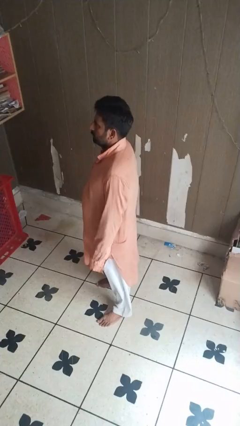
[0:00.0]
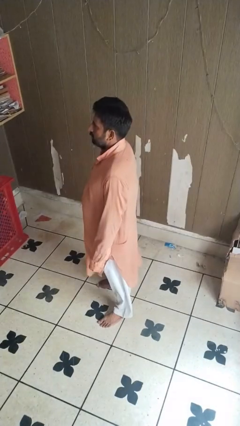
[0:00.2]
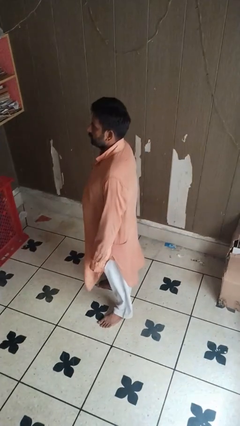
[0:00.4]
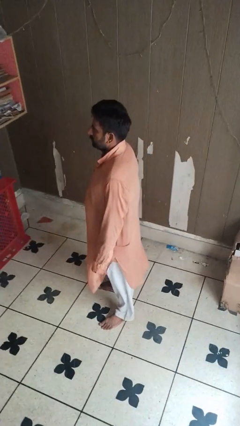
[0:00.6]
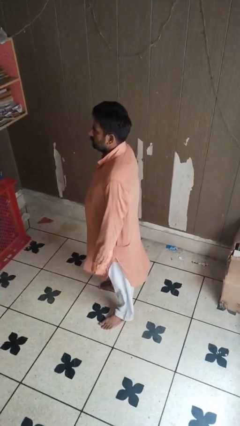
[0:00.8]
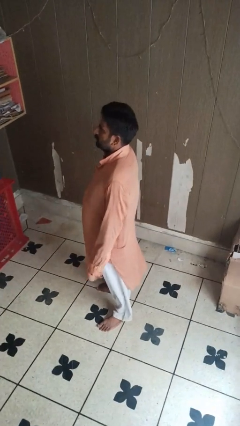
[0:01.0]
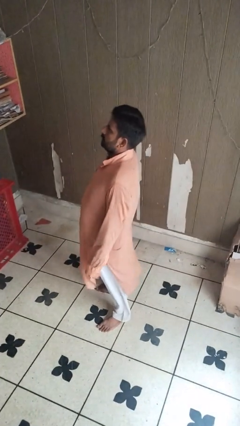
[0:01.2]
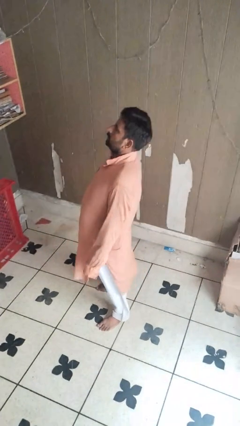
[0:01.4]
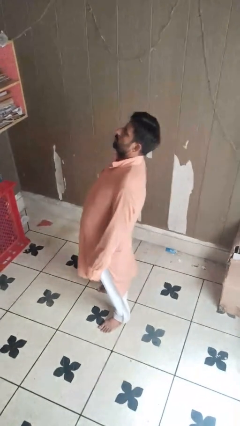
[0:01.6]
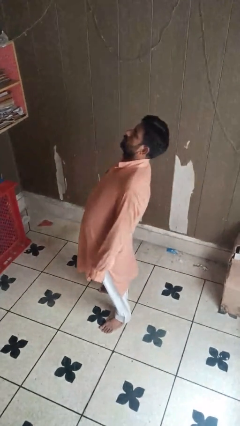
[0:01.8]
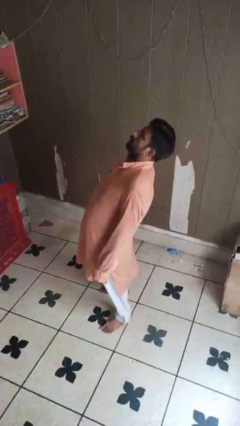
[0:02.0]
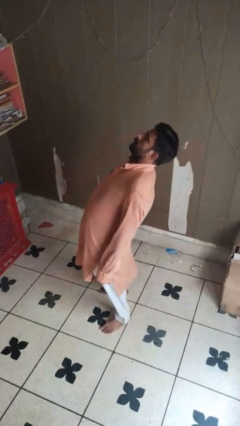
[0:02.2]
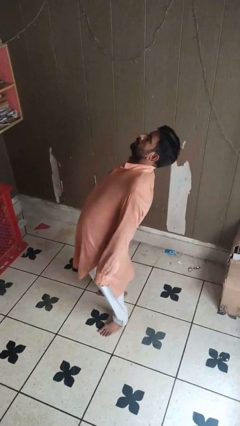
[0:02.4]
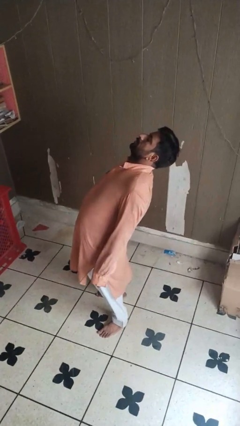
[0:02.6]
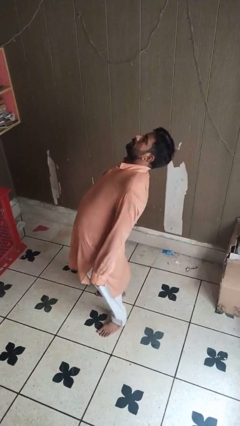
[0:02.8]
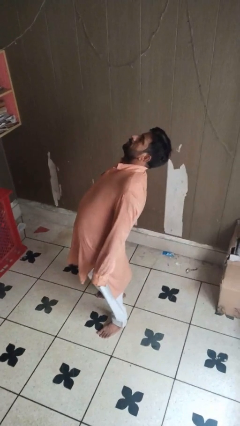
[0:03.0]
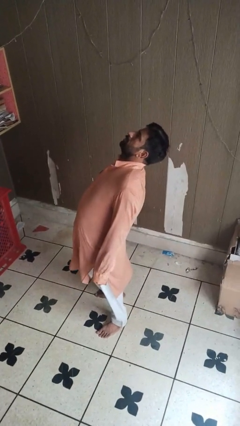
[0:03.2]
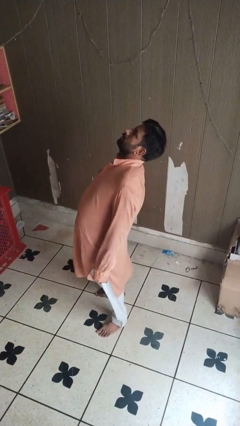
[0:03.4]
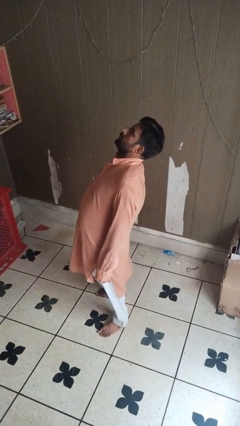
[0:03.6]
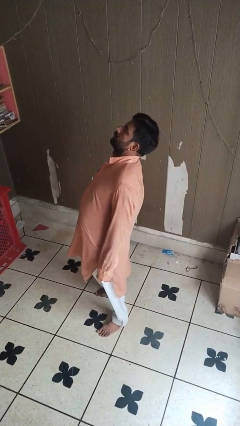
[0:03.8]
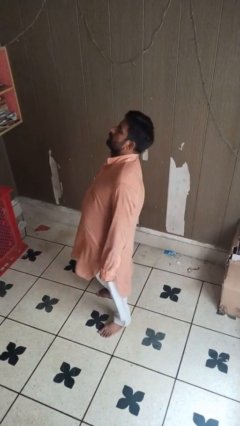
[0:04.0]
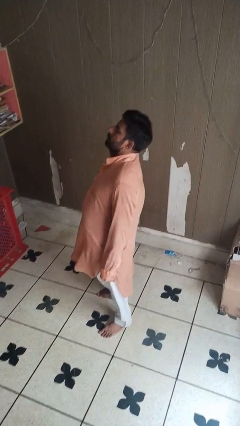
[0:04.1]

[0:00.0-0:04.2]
person stretches back

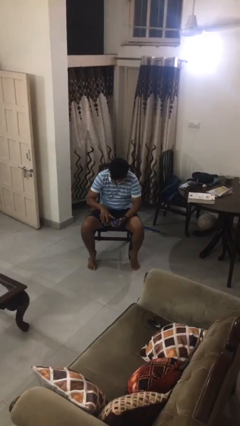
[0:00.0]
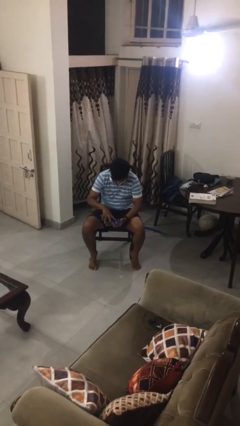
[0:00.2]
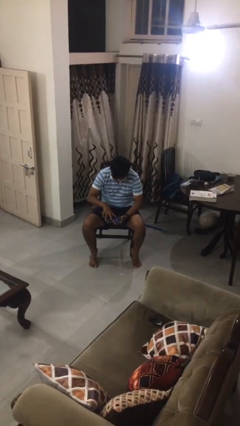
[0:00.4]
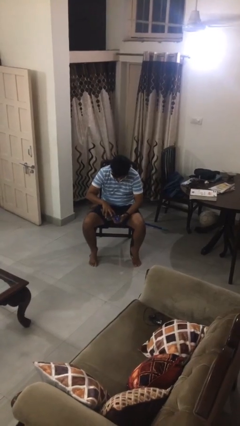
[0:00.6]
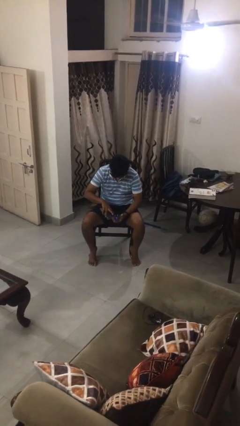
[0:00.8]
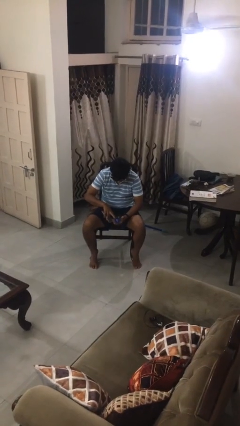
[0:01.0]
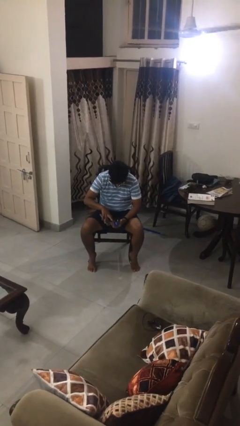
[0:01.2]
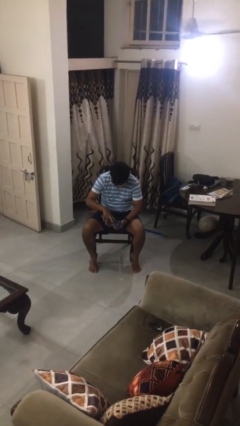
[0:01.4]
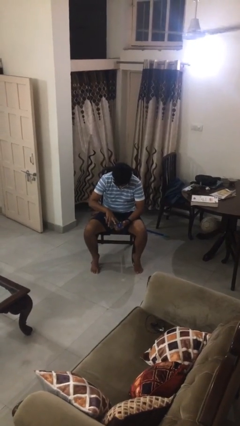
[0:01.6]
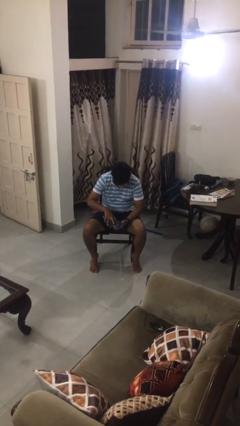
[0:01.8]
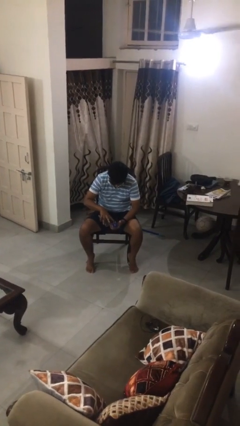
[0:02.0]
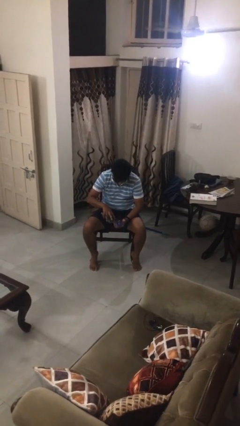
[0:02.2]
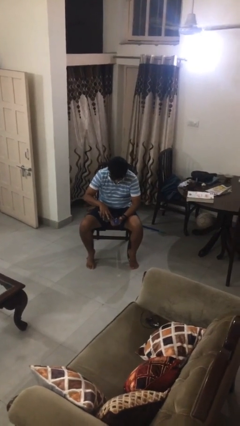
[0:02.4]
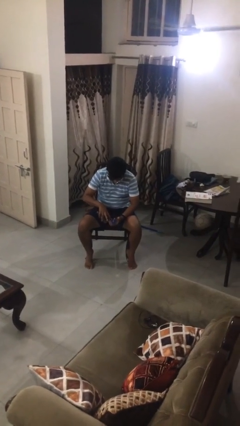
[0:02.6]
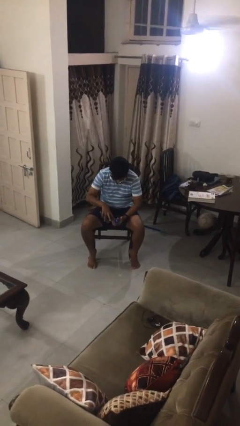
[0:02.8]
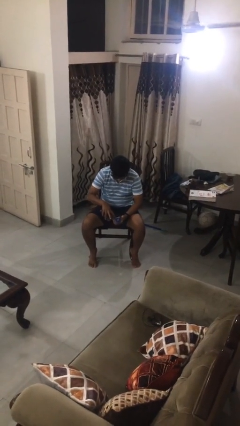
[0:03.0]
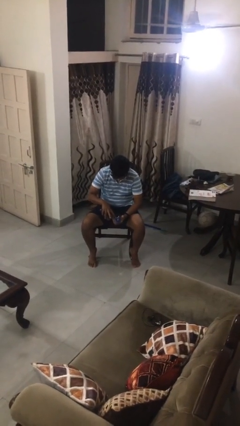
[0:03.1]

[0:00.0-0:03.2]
person searches jewelry box

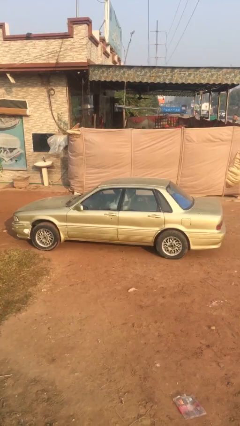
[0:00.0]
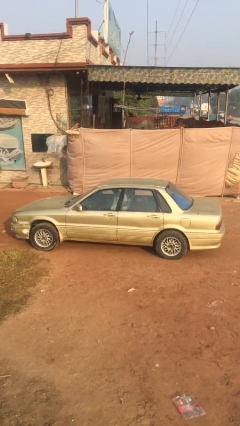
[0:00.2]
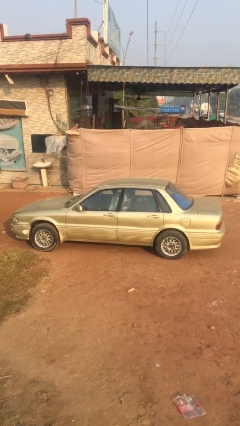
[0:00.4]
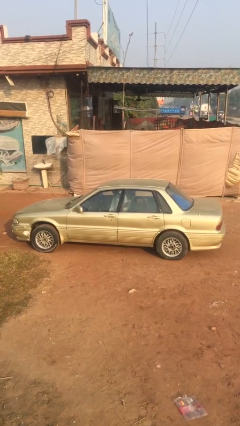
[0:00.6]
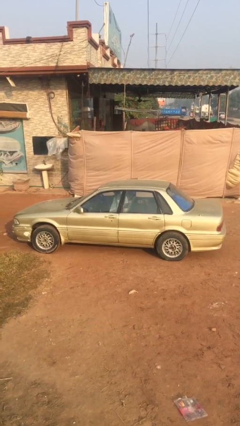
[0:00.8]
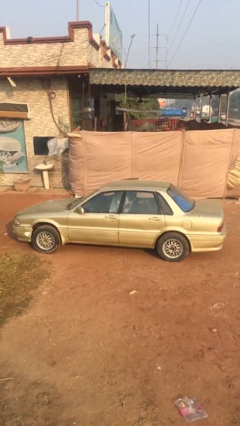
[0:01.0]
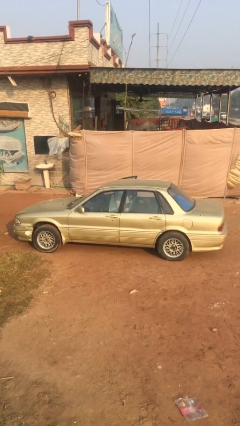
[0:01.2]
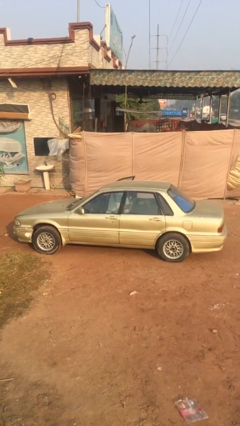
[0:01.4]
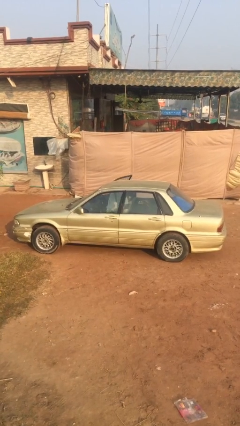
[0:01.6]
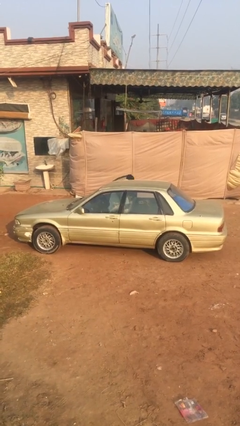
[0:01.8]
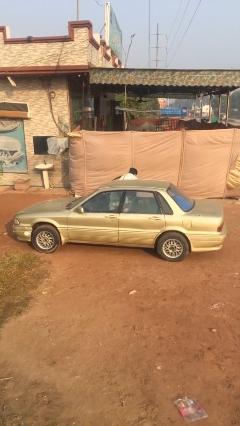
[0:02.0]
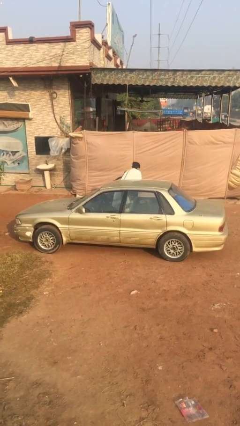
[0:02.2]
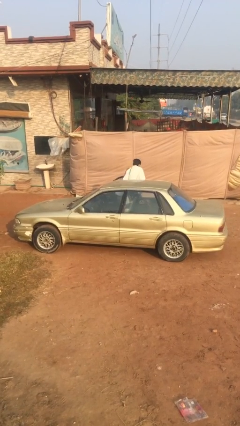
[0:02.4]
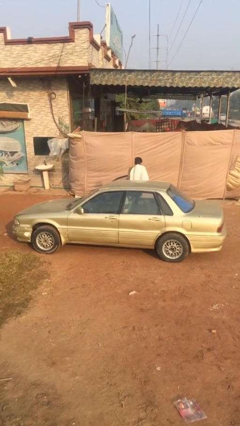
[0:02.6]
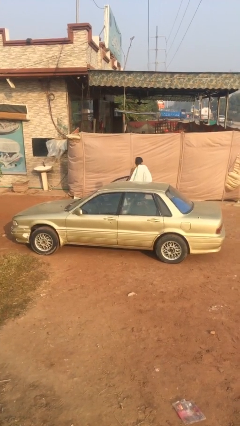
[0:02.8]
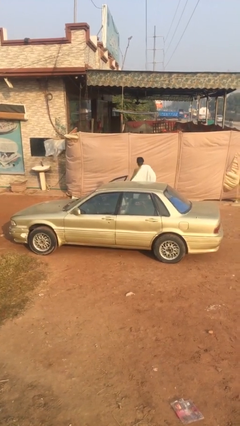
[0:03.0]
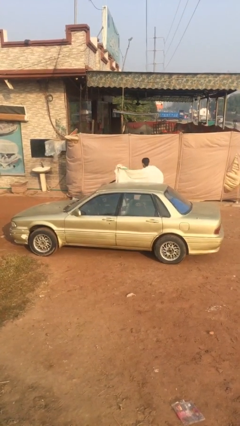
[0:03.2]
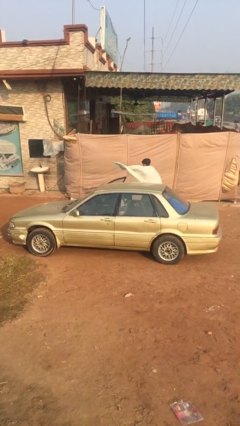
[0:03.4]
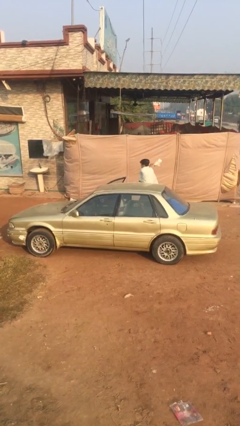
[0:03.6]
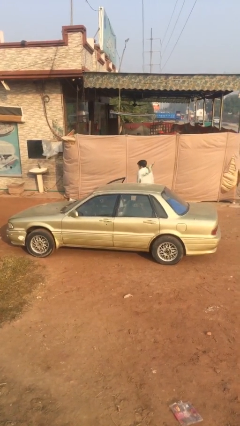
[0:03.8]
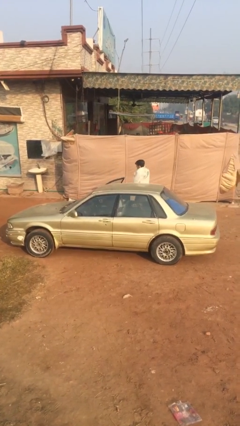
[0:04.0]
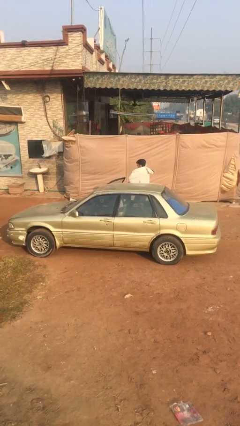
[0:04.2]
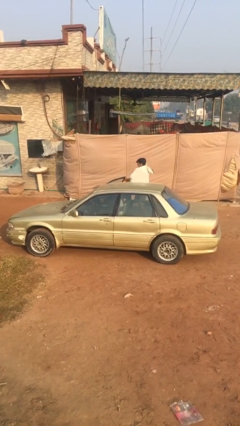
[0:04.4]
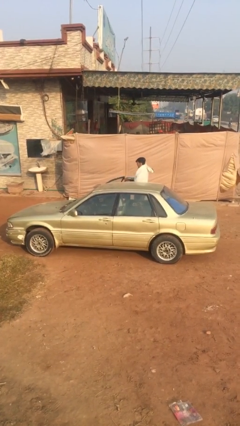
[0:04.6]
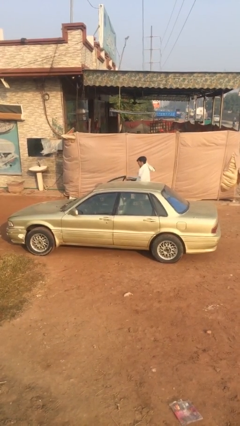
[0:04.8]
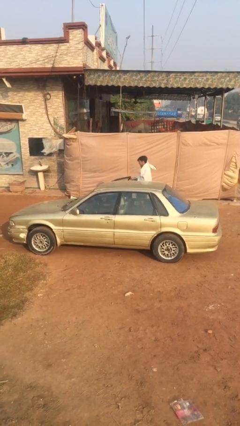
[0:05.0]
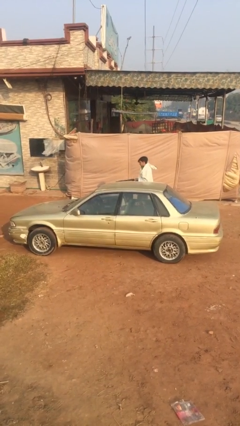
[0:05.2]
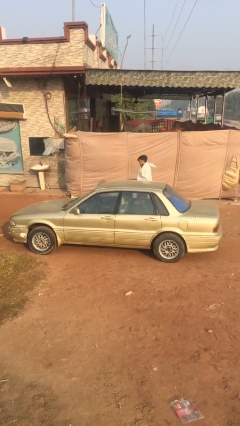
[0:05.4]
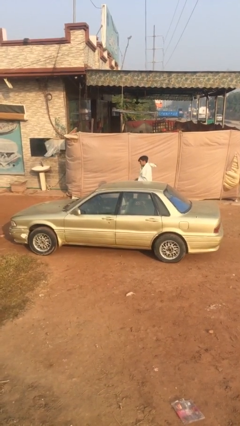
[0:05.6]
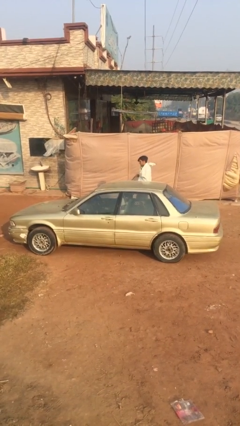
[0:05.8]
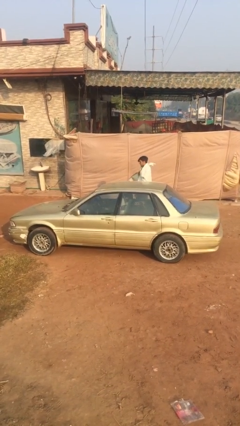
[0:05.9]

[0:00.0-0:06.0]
car drops off person

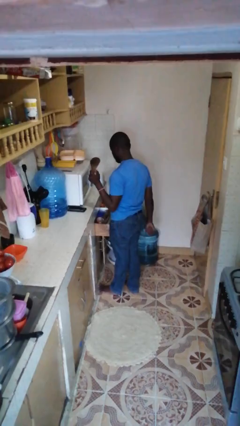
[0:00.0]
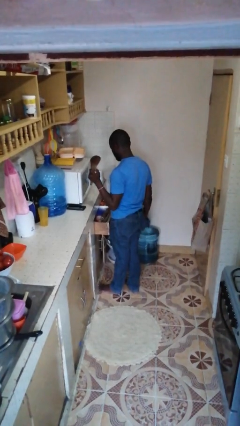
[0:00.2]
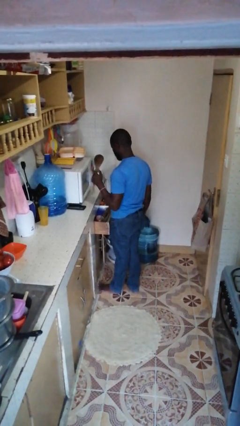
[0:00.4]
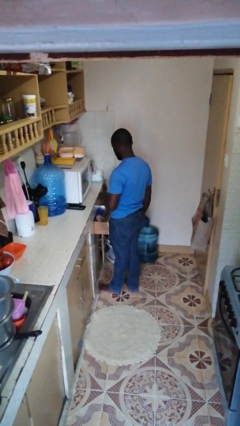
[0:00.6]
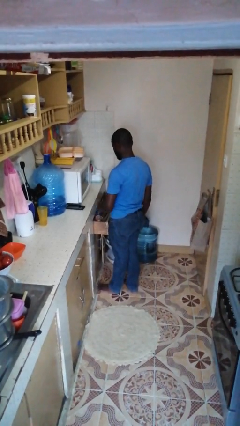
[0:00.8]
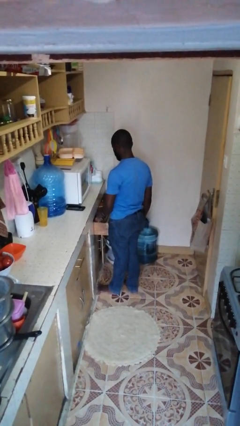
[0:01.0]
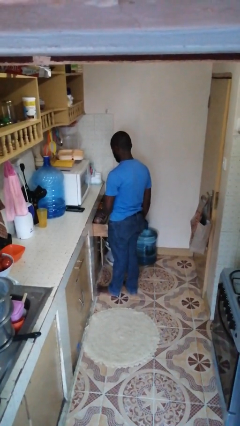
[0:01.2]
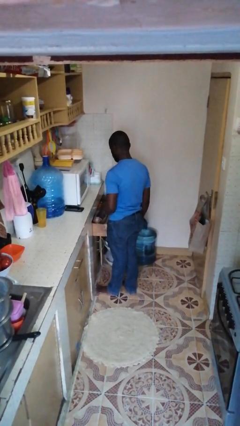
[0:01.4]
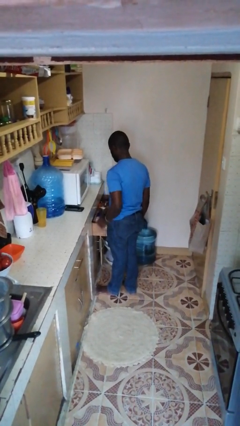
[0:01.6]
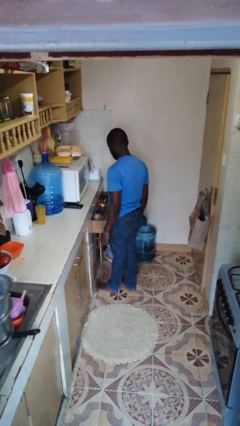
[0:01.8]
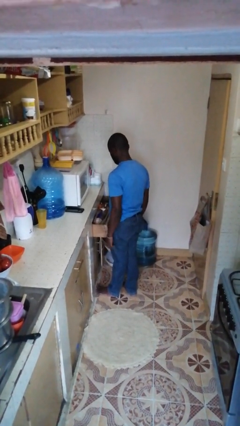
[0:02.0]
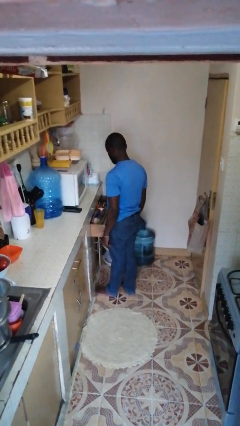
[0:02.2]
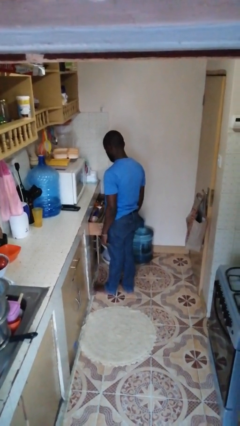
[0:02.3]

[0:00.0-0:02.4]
person puts object into kitchen drawer

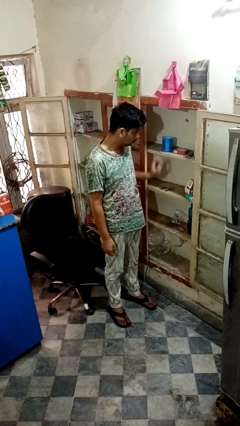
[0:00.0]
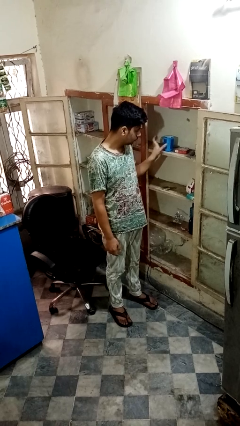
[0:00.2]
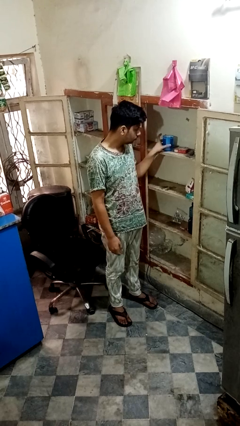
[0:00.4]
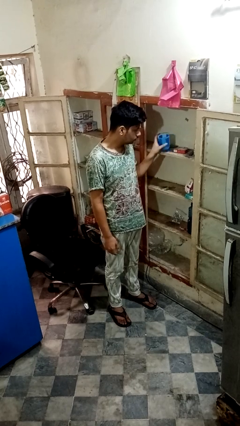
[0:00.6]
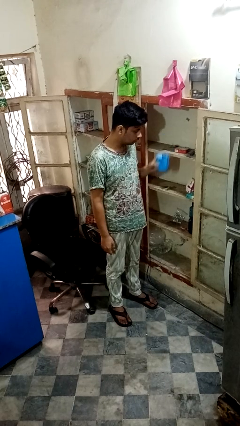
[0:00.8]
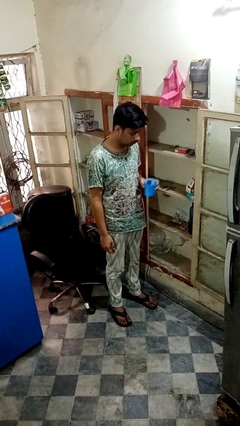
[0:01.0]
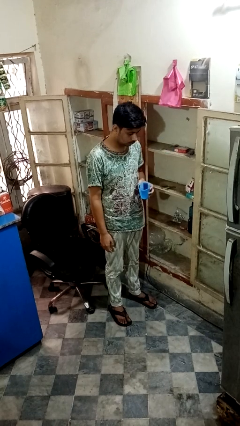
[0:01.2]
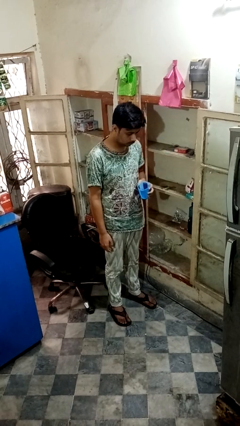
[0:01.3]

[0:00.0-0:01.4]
person takes object from cabinet

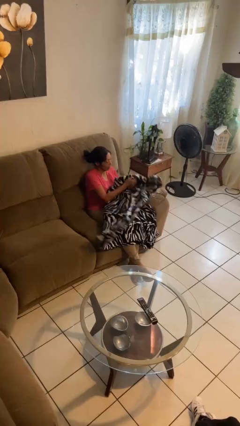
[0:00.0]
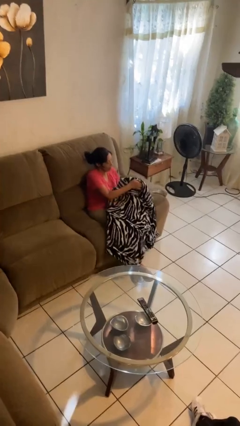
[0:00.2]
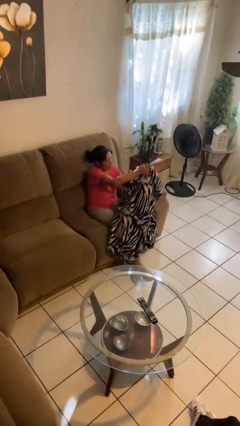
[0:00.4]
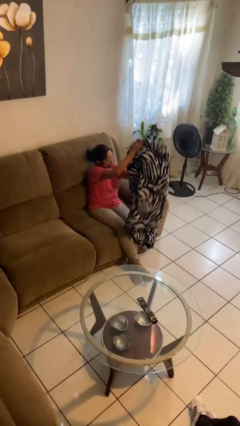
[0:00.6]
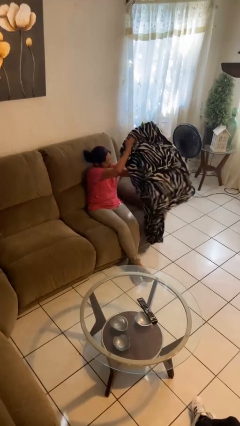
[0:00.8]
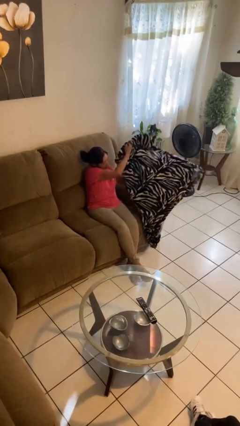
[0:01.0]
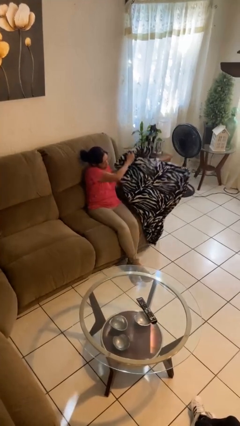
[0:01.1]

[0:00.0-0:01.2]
person uncovers with blanket
